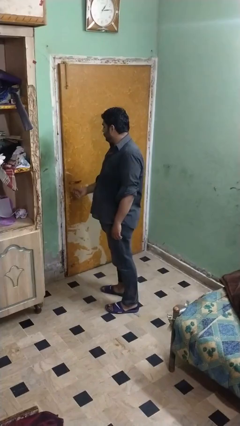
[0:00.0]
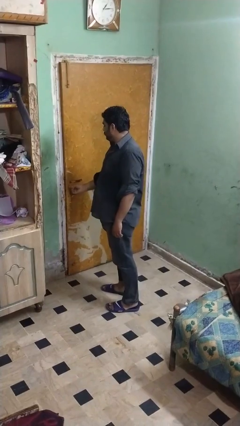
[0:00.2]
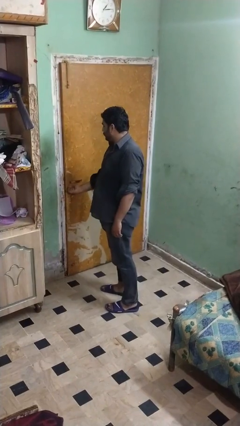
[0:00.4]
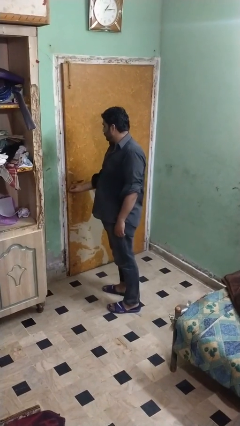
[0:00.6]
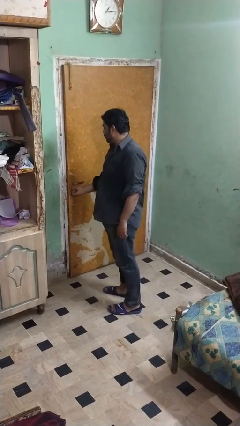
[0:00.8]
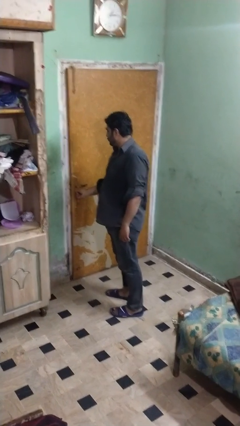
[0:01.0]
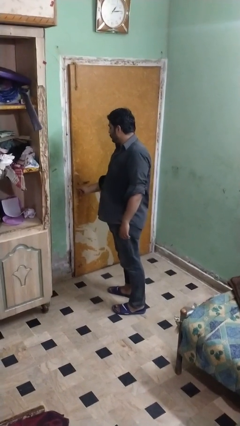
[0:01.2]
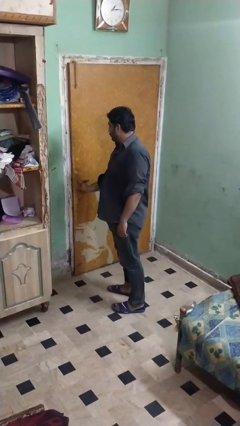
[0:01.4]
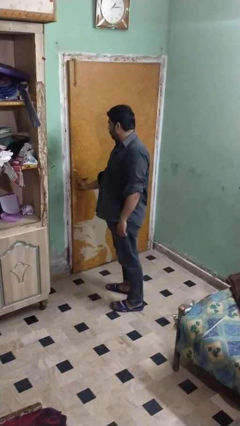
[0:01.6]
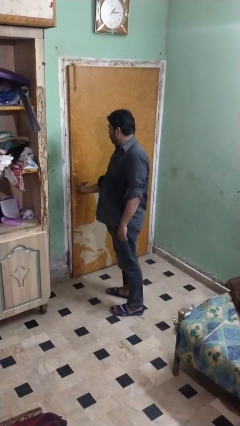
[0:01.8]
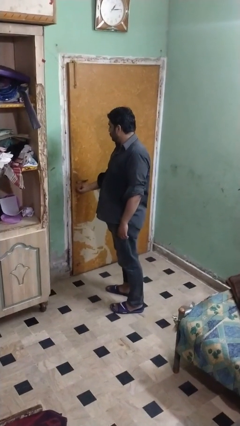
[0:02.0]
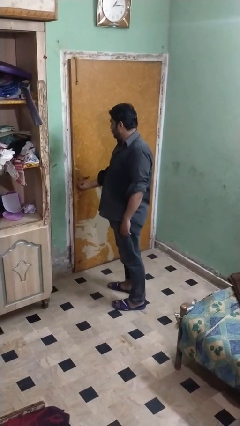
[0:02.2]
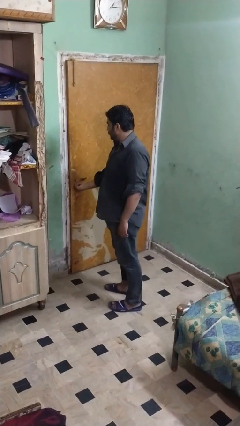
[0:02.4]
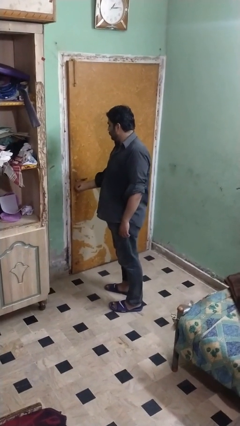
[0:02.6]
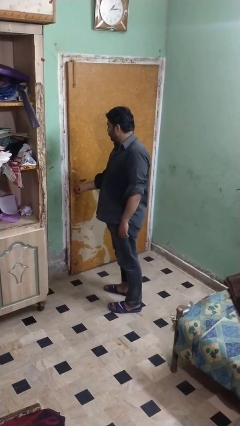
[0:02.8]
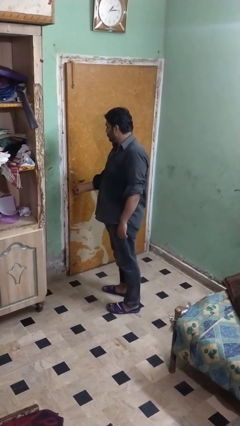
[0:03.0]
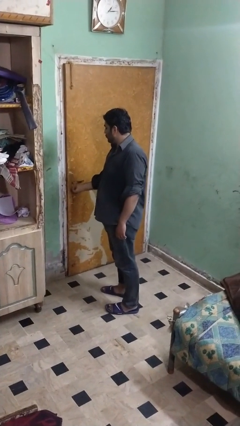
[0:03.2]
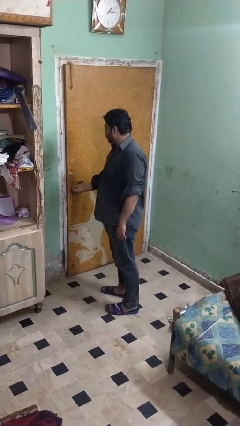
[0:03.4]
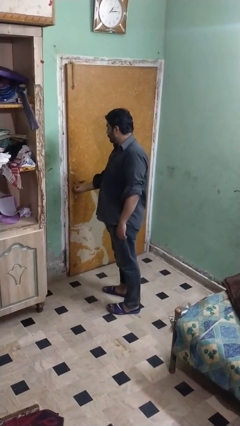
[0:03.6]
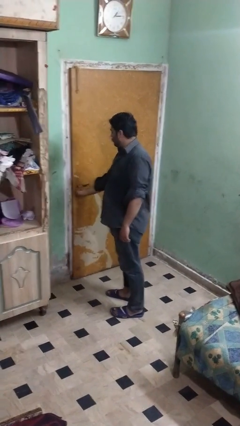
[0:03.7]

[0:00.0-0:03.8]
person locks door with keys

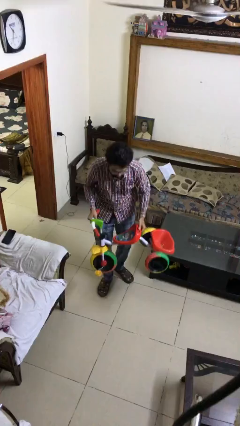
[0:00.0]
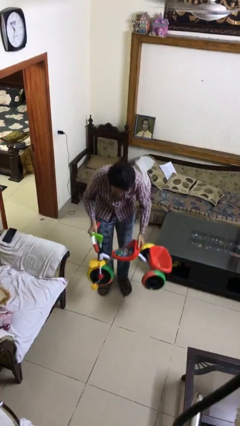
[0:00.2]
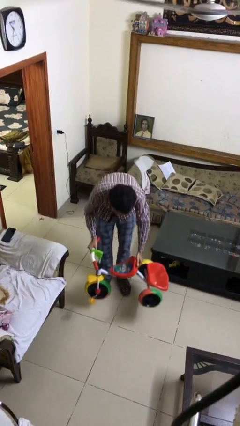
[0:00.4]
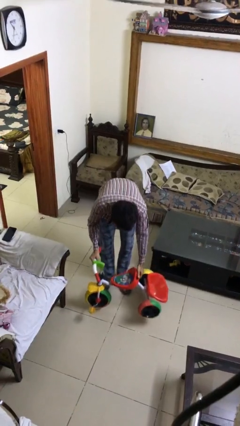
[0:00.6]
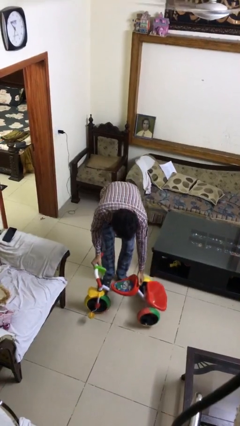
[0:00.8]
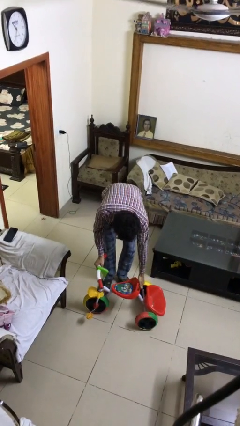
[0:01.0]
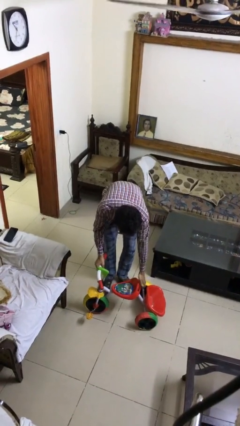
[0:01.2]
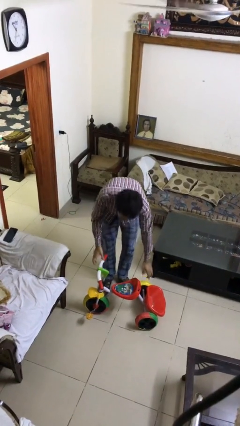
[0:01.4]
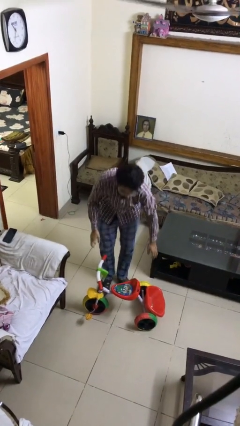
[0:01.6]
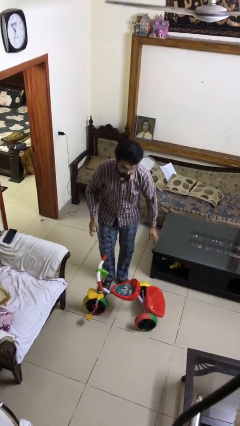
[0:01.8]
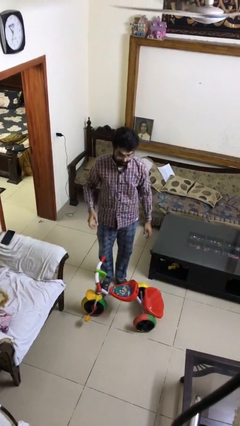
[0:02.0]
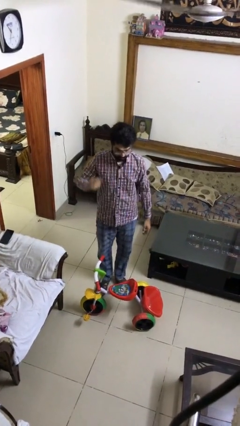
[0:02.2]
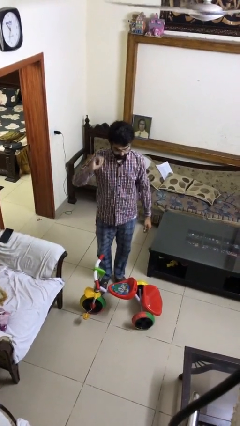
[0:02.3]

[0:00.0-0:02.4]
person puts down object on floor

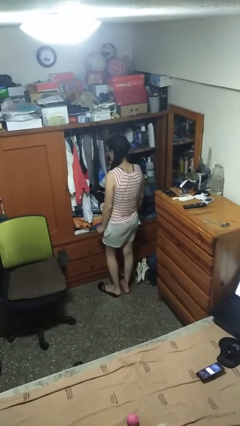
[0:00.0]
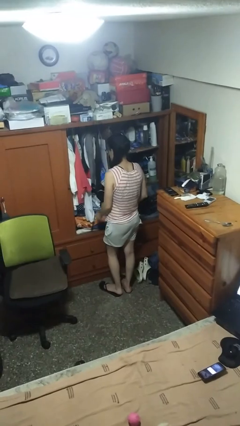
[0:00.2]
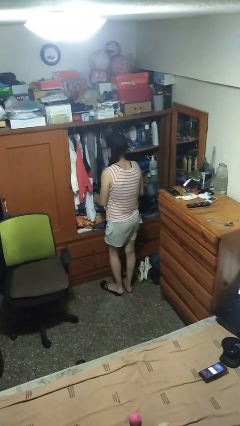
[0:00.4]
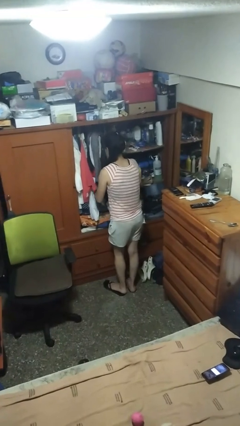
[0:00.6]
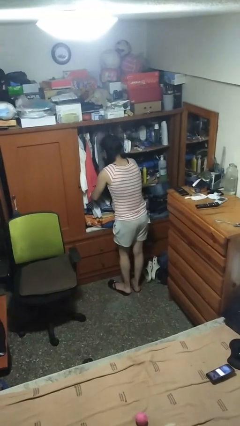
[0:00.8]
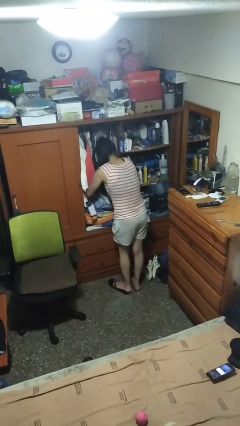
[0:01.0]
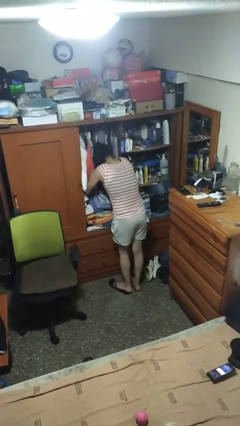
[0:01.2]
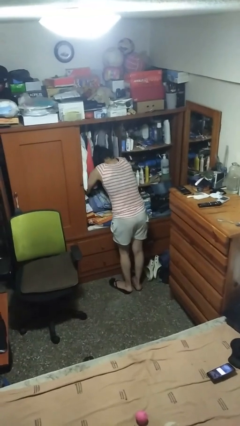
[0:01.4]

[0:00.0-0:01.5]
person searches in cabinet

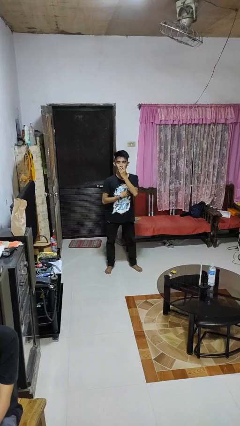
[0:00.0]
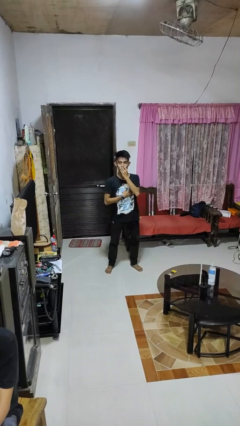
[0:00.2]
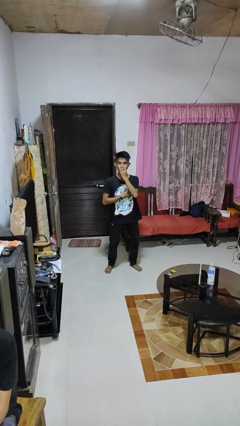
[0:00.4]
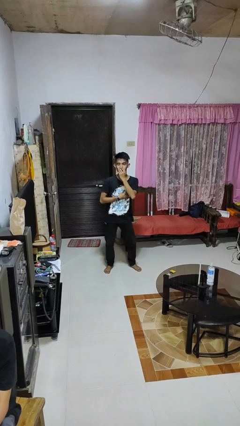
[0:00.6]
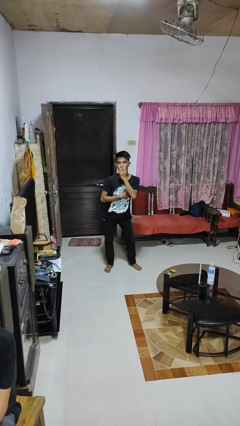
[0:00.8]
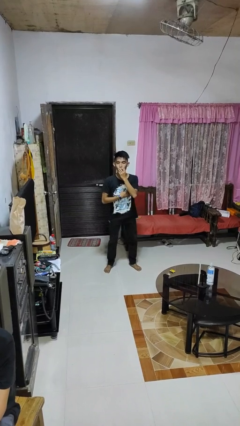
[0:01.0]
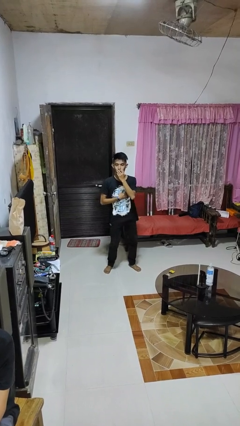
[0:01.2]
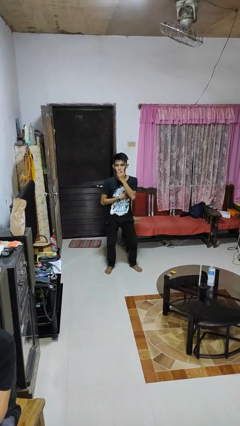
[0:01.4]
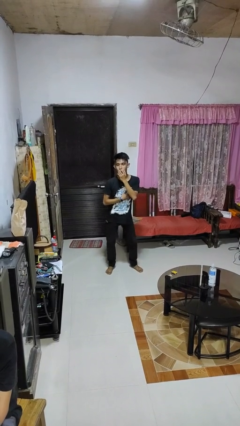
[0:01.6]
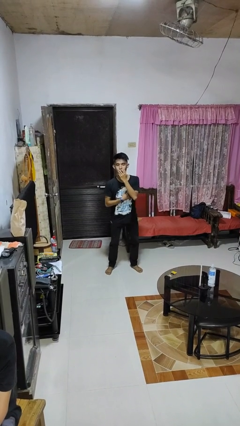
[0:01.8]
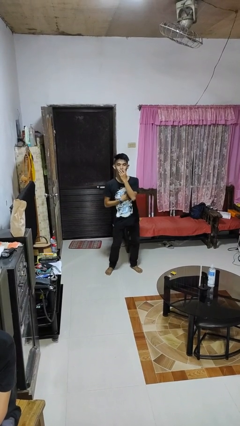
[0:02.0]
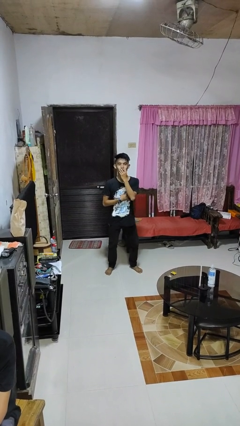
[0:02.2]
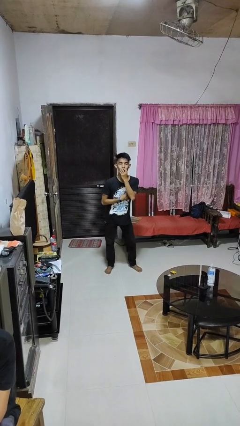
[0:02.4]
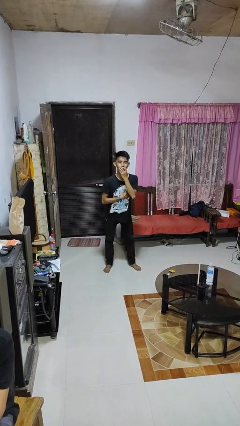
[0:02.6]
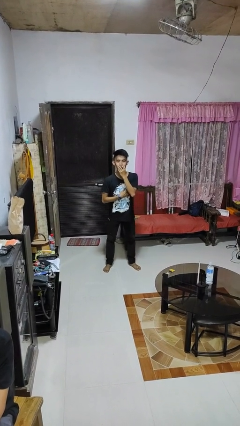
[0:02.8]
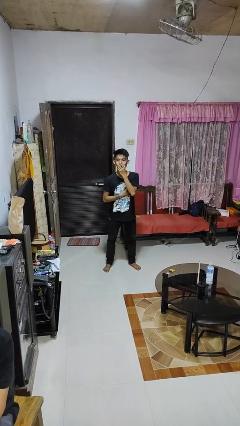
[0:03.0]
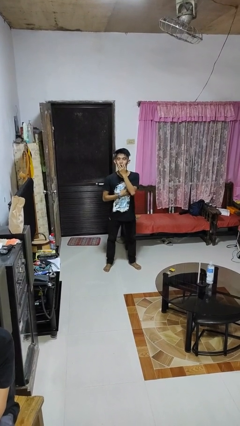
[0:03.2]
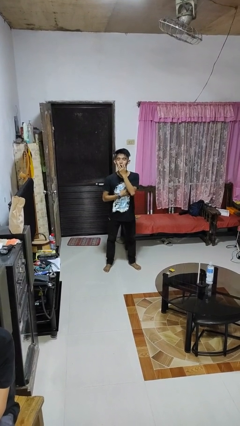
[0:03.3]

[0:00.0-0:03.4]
person wiggles hips

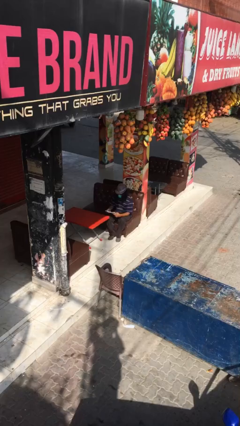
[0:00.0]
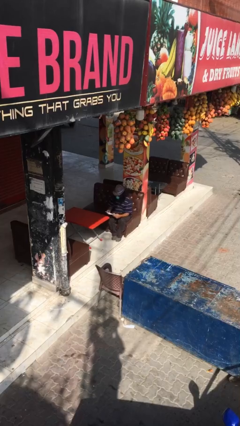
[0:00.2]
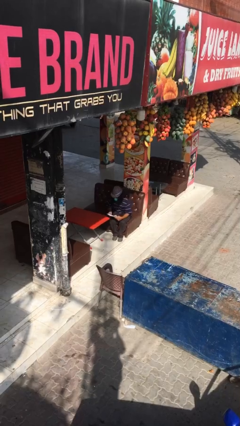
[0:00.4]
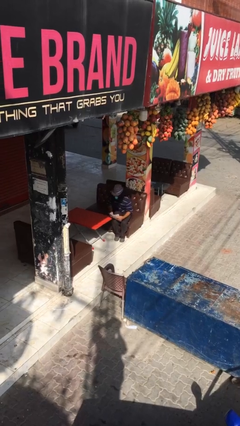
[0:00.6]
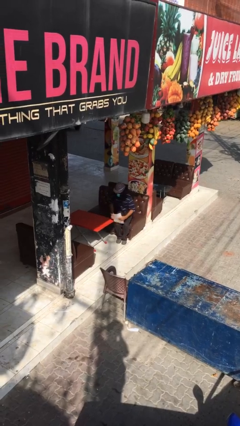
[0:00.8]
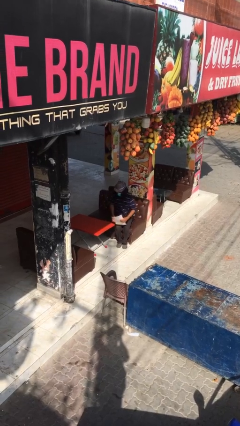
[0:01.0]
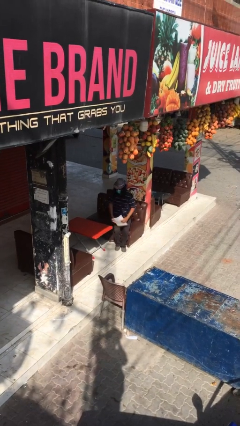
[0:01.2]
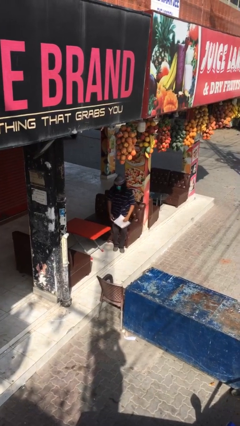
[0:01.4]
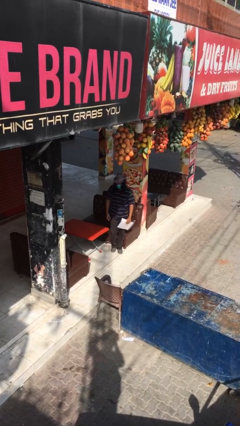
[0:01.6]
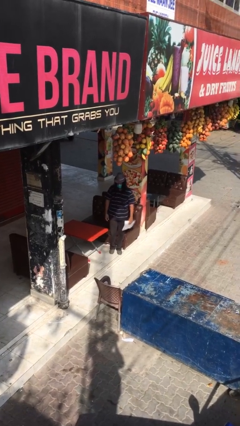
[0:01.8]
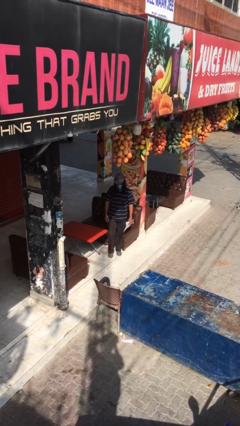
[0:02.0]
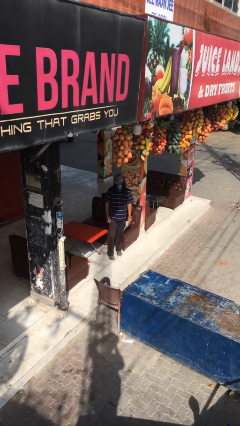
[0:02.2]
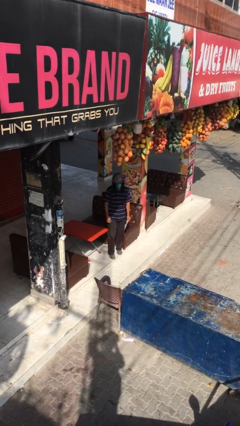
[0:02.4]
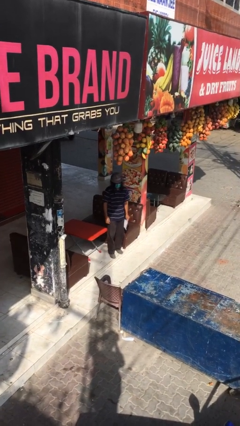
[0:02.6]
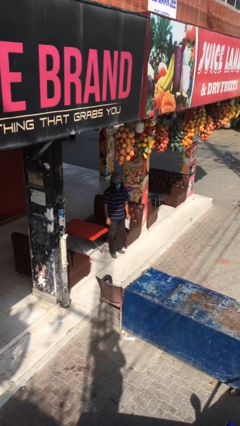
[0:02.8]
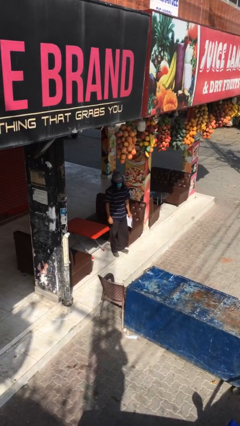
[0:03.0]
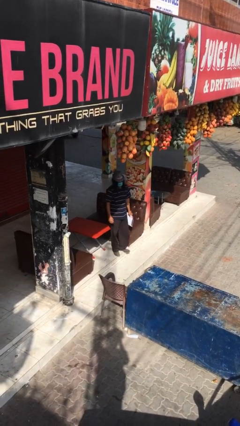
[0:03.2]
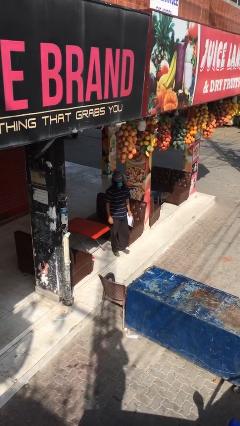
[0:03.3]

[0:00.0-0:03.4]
person stands up

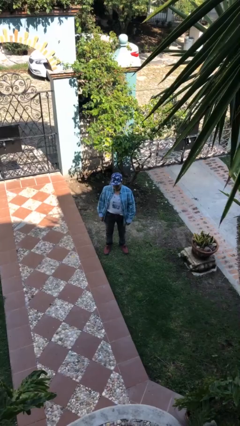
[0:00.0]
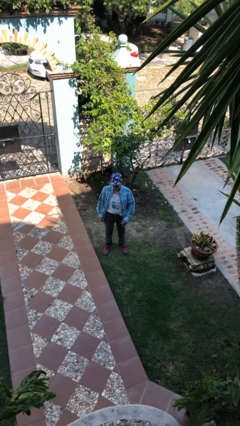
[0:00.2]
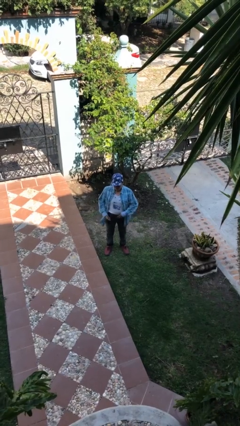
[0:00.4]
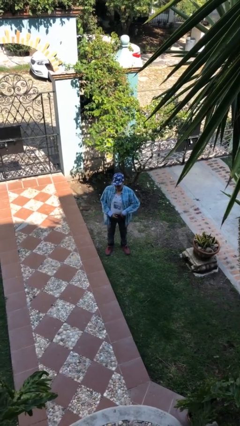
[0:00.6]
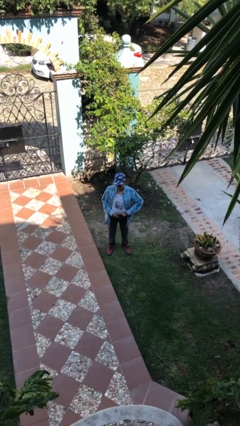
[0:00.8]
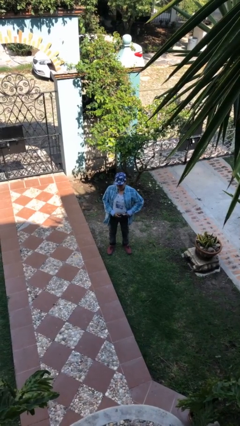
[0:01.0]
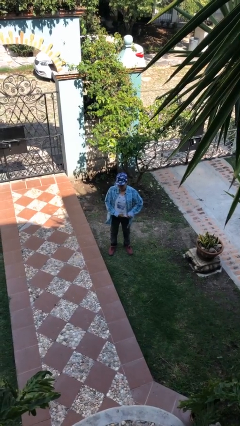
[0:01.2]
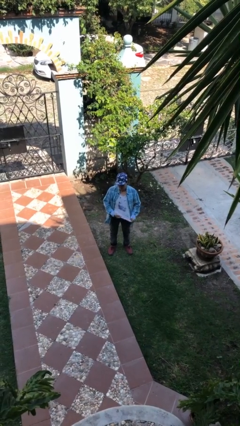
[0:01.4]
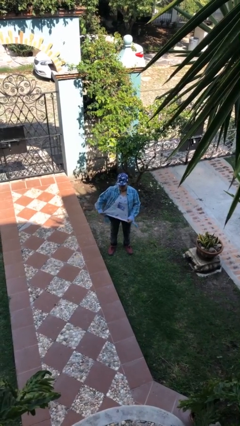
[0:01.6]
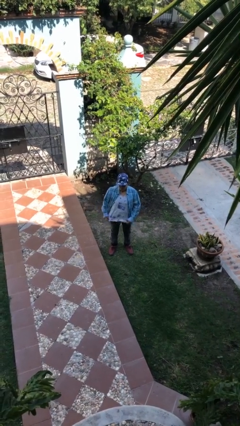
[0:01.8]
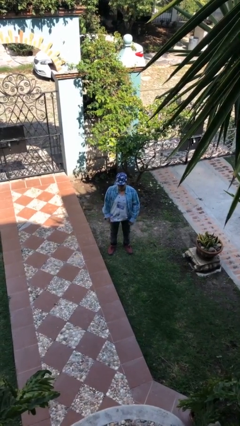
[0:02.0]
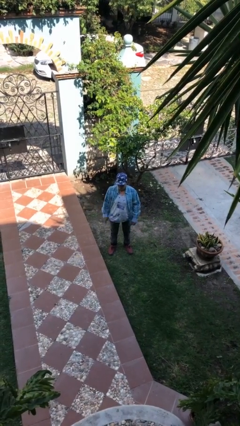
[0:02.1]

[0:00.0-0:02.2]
person untucks shirt

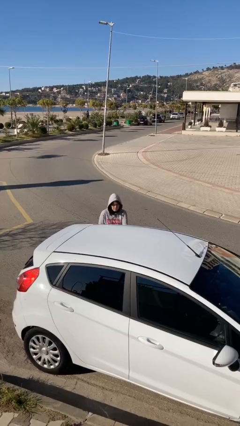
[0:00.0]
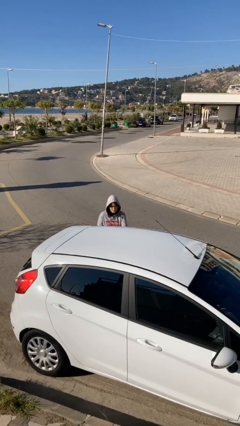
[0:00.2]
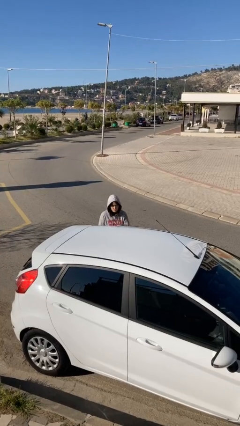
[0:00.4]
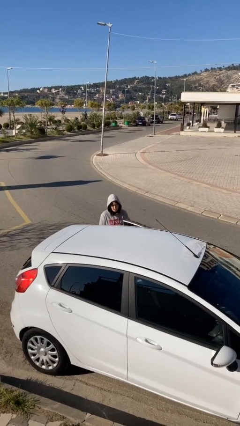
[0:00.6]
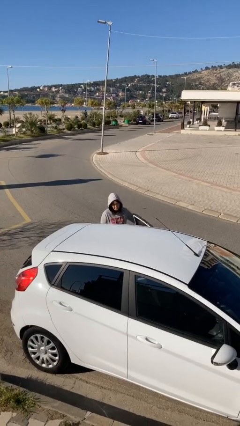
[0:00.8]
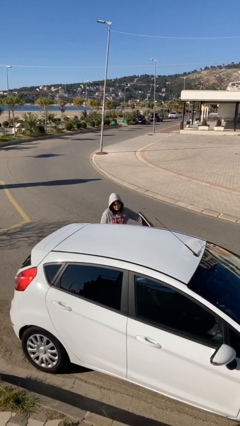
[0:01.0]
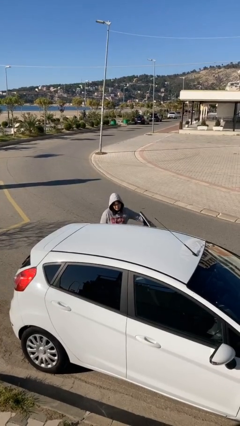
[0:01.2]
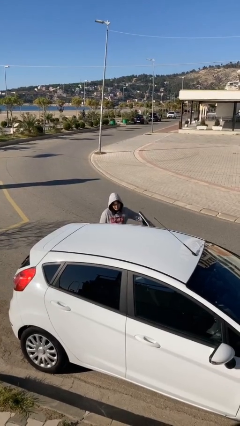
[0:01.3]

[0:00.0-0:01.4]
person opens car door
